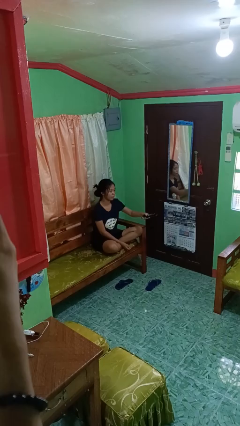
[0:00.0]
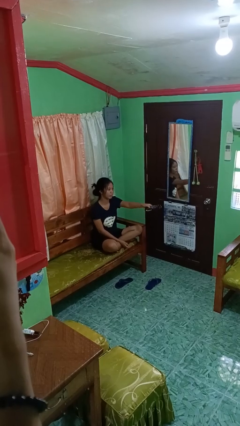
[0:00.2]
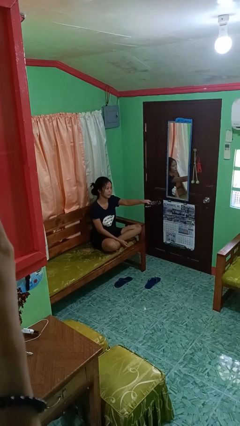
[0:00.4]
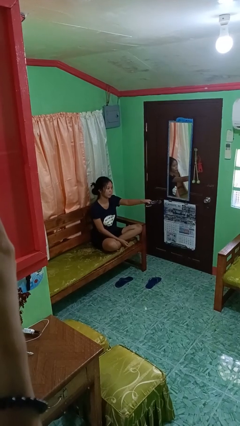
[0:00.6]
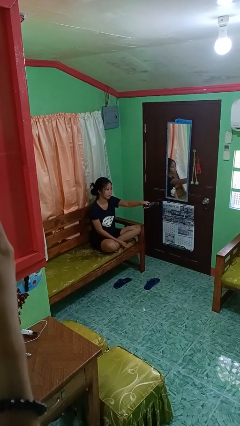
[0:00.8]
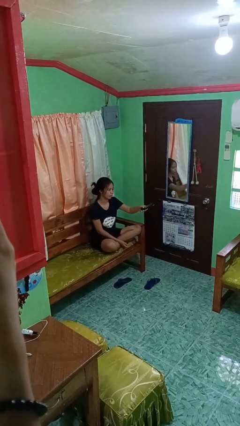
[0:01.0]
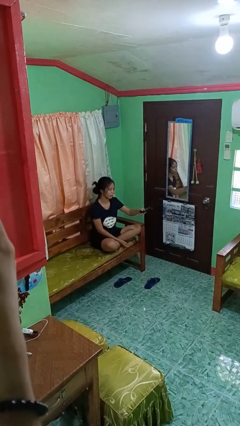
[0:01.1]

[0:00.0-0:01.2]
person uses television remote

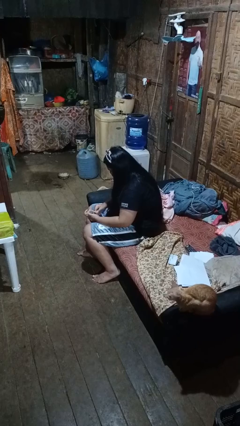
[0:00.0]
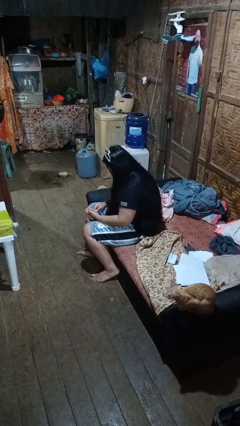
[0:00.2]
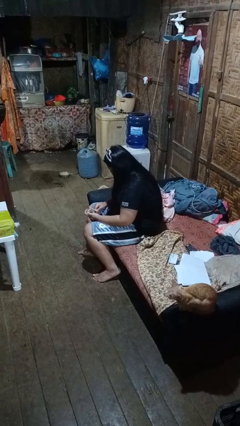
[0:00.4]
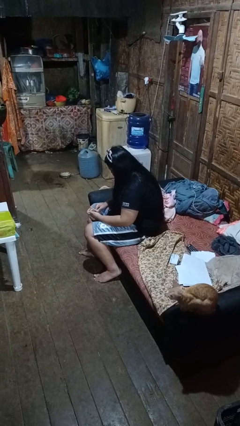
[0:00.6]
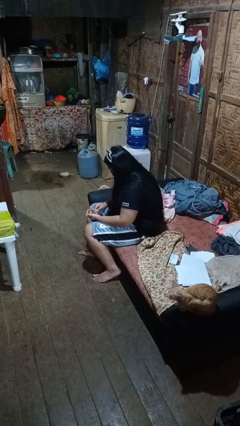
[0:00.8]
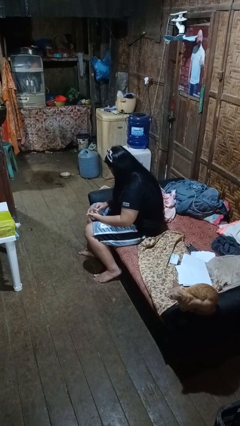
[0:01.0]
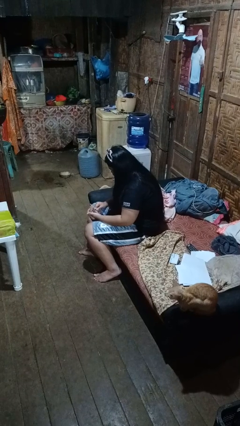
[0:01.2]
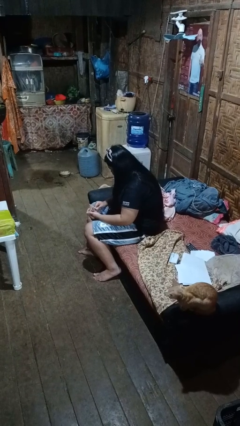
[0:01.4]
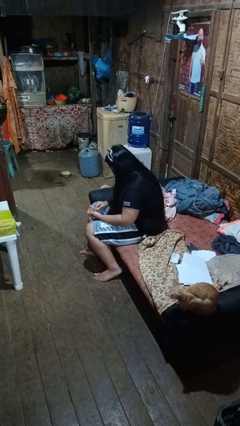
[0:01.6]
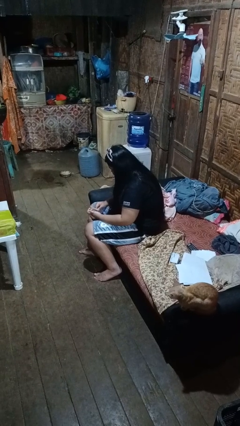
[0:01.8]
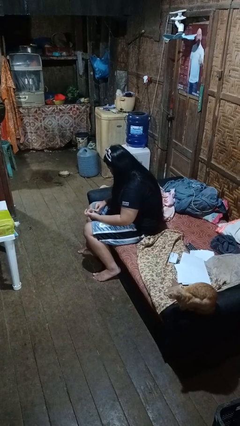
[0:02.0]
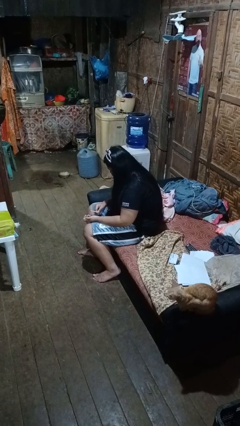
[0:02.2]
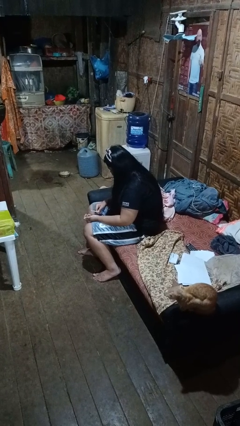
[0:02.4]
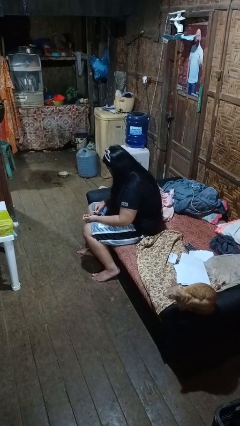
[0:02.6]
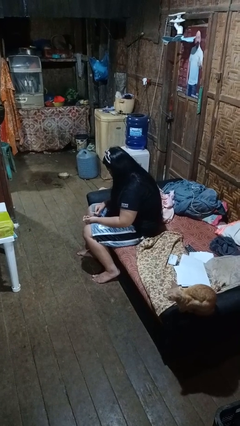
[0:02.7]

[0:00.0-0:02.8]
person files fingernails

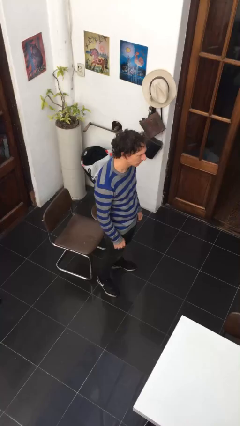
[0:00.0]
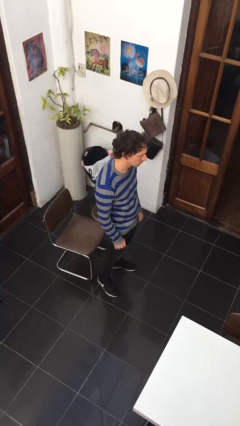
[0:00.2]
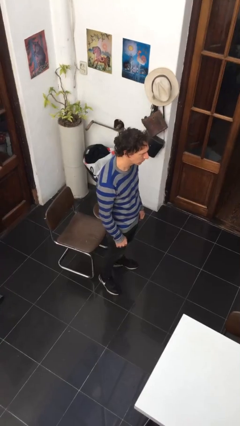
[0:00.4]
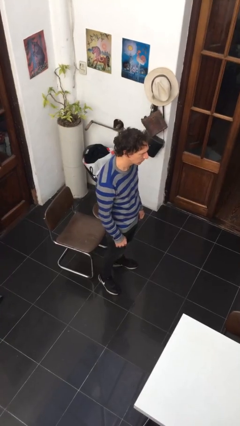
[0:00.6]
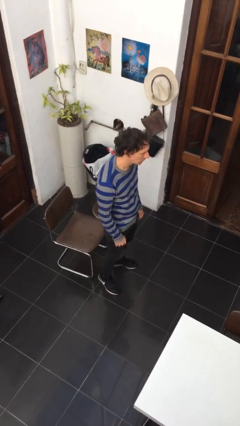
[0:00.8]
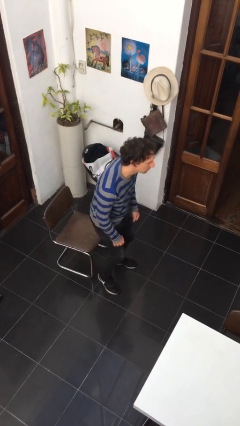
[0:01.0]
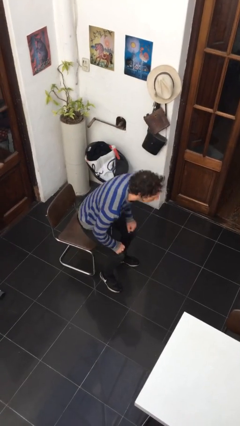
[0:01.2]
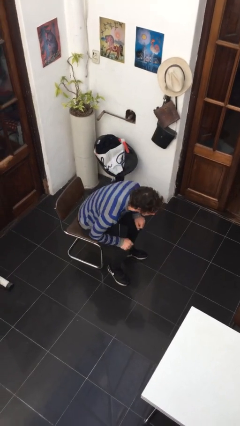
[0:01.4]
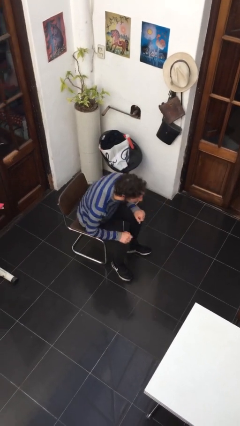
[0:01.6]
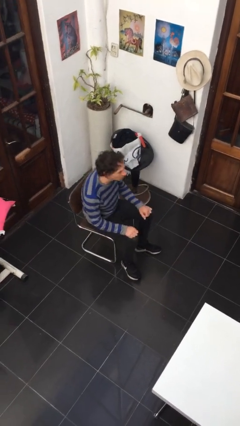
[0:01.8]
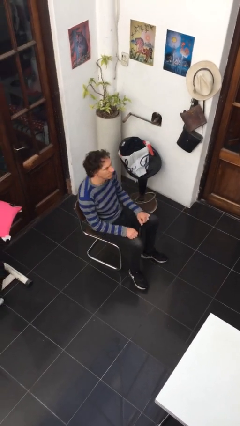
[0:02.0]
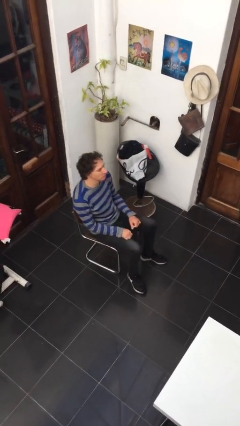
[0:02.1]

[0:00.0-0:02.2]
person sits down

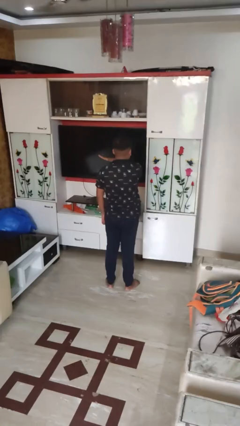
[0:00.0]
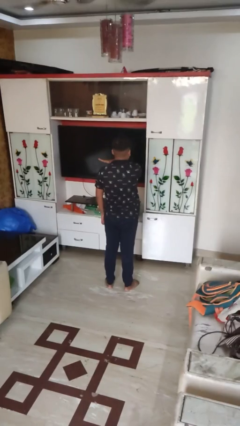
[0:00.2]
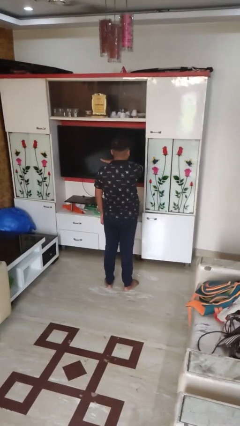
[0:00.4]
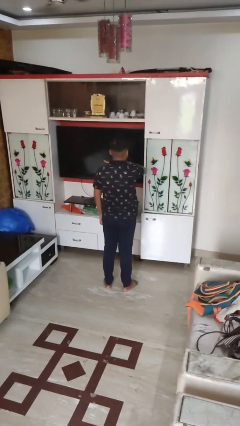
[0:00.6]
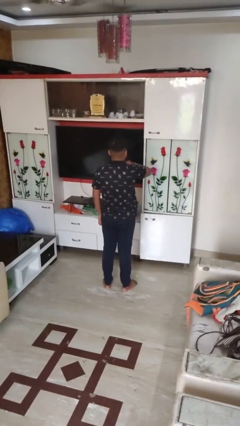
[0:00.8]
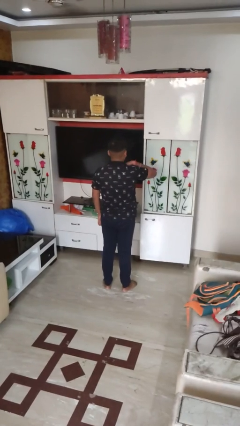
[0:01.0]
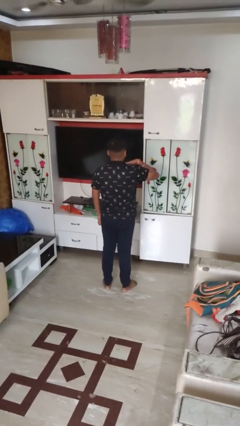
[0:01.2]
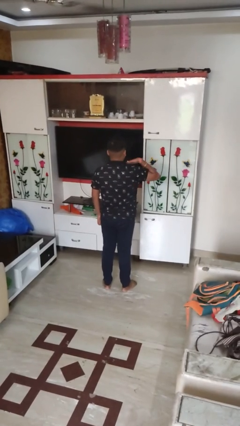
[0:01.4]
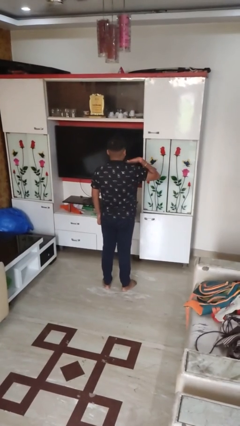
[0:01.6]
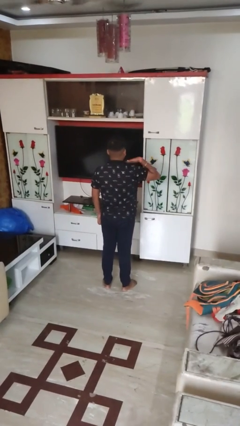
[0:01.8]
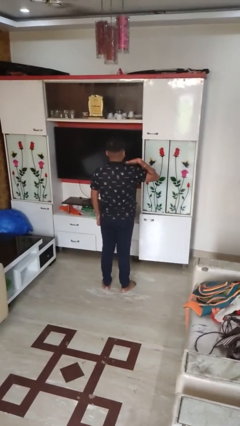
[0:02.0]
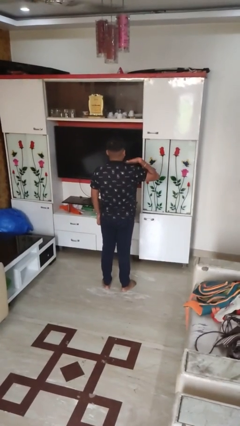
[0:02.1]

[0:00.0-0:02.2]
person gestures cut

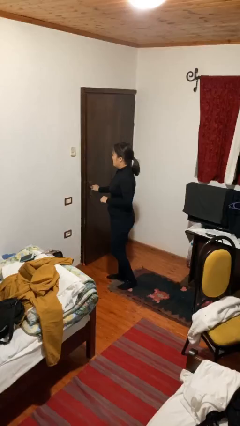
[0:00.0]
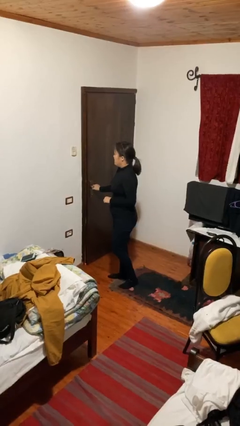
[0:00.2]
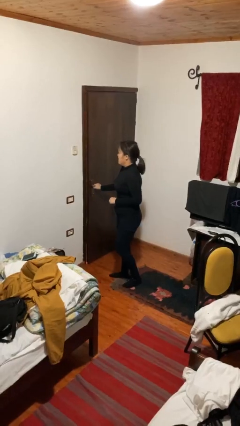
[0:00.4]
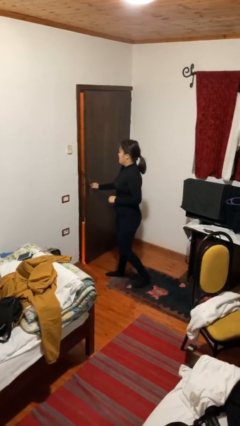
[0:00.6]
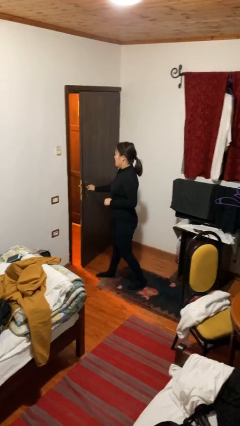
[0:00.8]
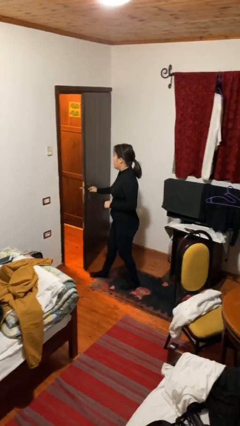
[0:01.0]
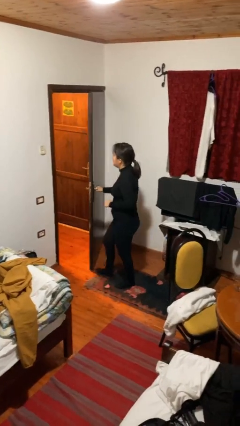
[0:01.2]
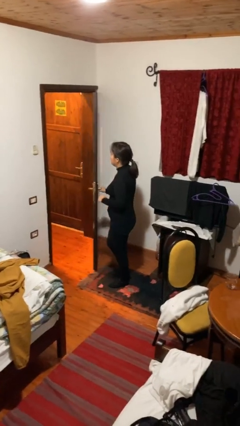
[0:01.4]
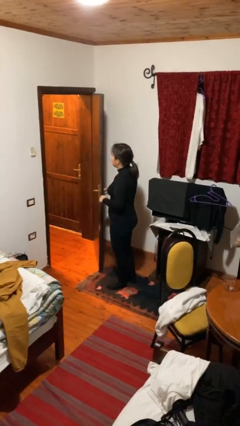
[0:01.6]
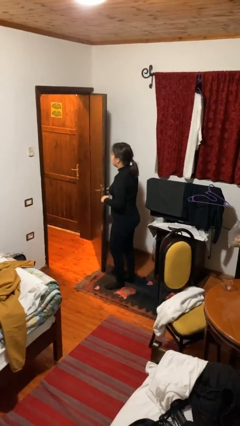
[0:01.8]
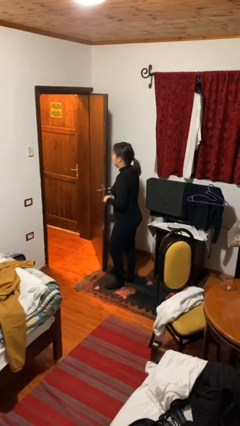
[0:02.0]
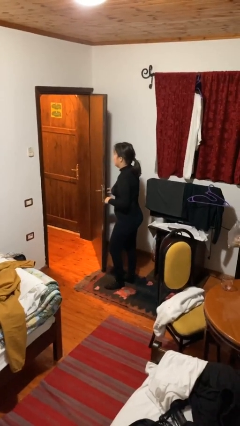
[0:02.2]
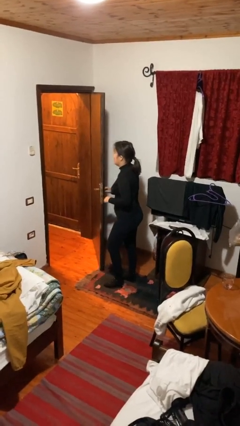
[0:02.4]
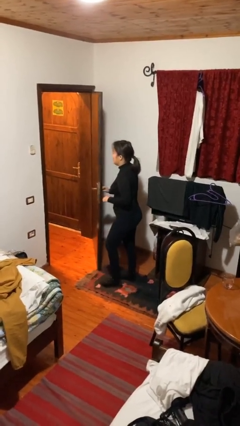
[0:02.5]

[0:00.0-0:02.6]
person opens facility door

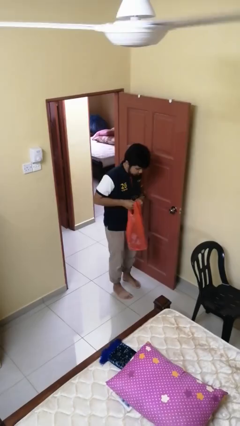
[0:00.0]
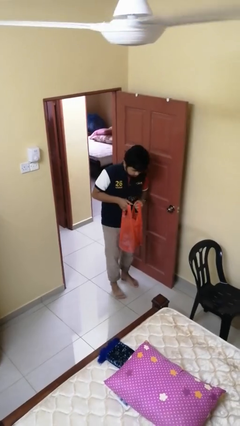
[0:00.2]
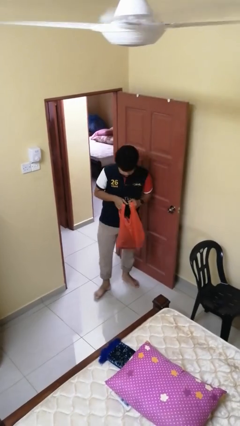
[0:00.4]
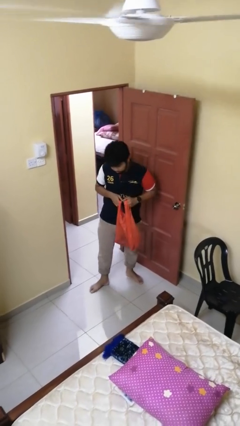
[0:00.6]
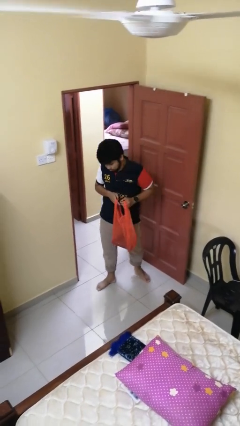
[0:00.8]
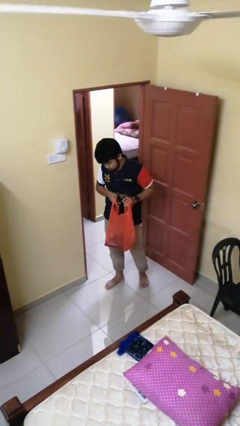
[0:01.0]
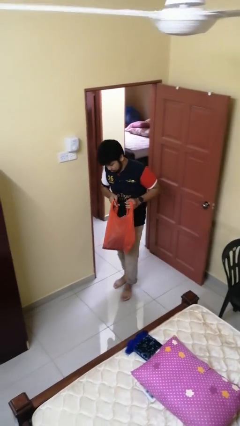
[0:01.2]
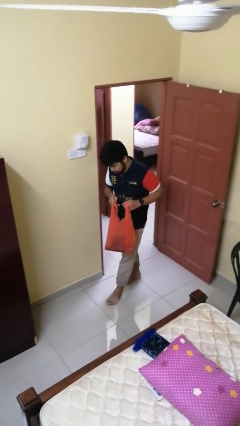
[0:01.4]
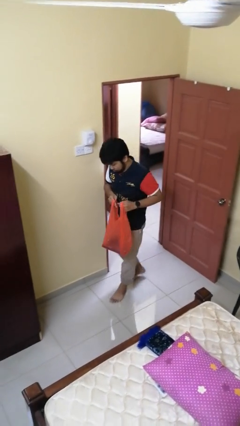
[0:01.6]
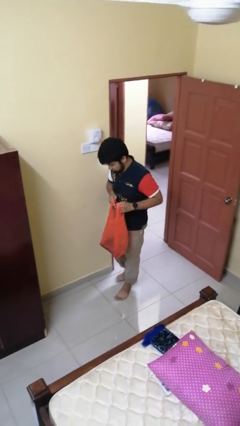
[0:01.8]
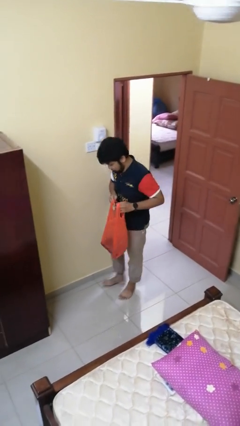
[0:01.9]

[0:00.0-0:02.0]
person carries groceries

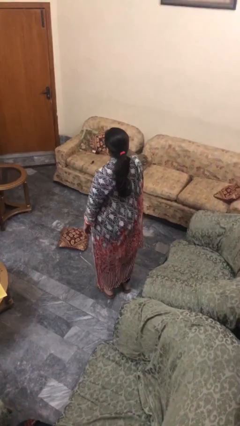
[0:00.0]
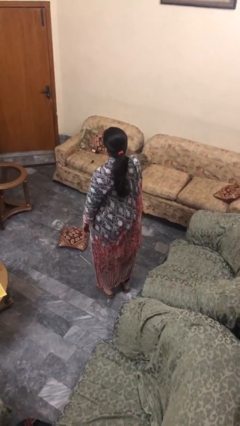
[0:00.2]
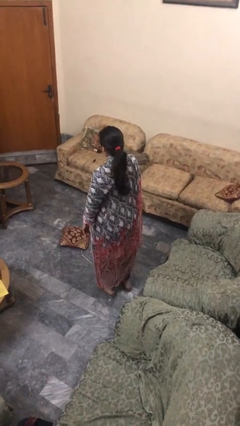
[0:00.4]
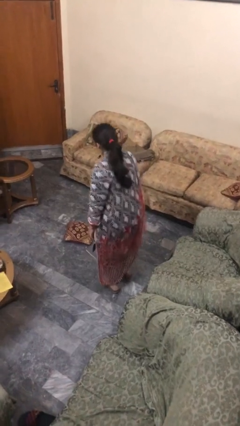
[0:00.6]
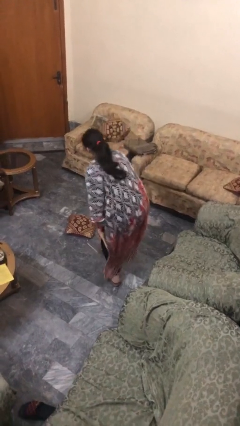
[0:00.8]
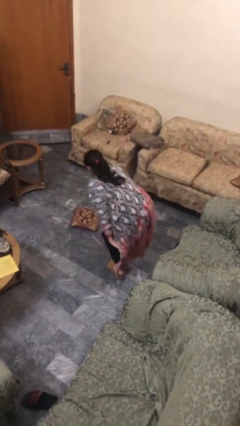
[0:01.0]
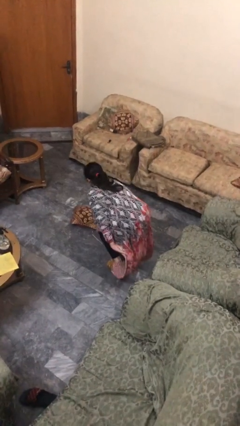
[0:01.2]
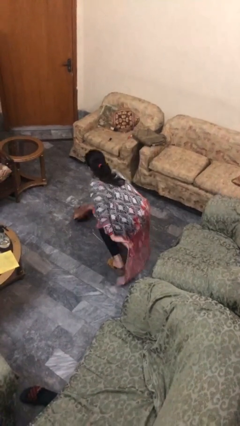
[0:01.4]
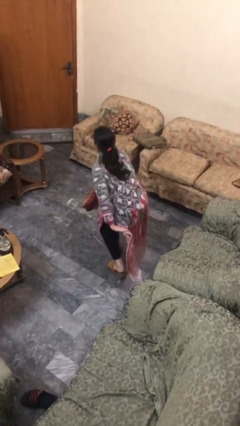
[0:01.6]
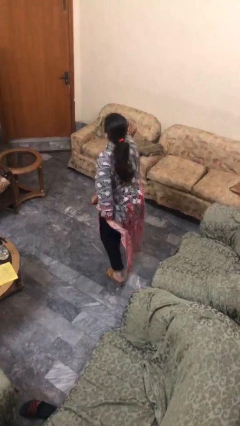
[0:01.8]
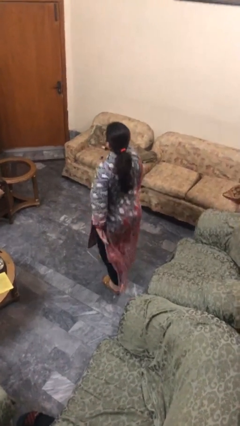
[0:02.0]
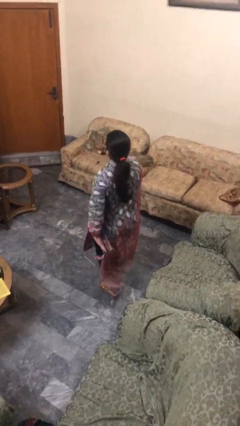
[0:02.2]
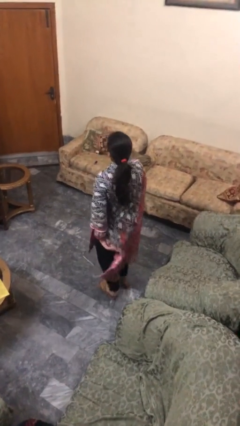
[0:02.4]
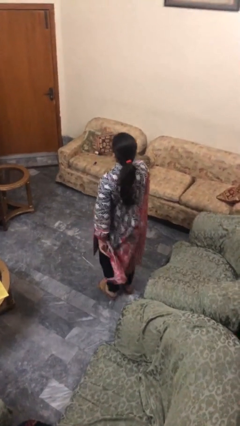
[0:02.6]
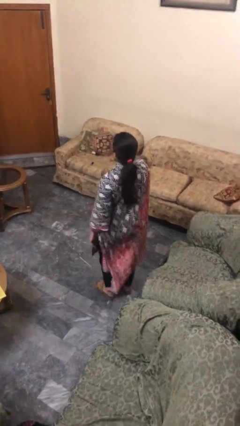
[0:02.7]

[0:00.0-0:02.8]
person picks up object from floor

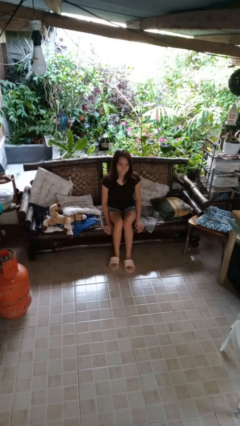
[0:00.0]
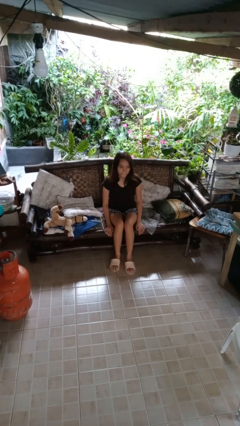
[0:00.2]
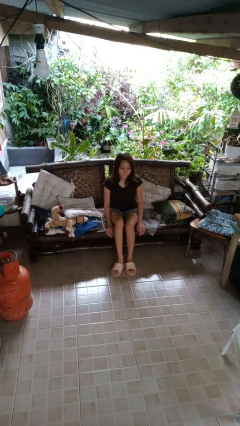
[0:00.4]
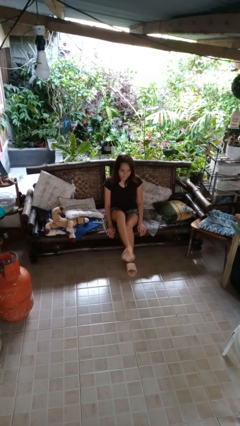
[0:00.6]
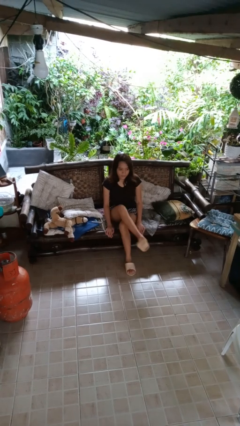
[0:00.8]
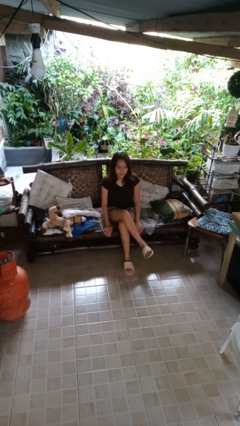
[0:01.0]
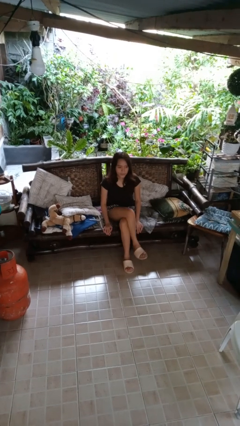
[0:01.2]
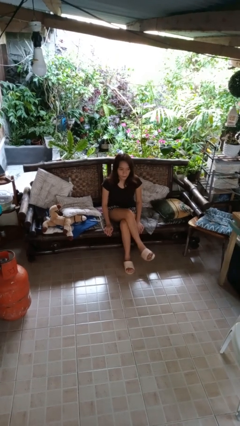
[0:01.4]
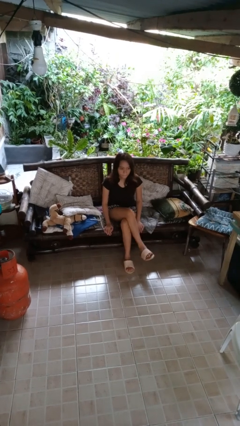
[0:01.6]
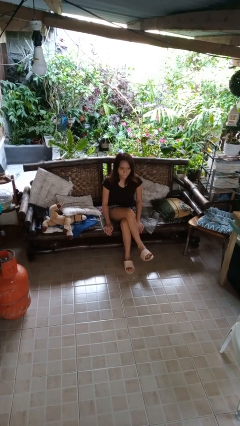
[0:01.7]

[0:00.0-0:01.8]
person crosses legs
